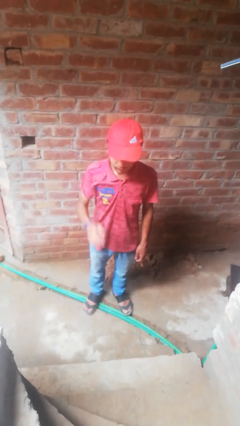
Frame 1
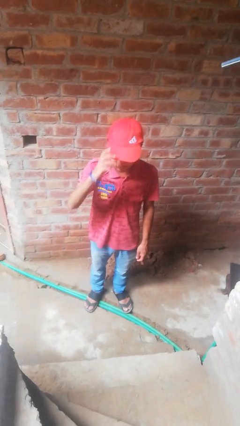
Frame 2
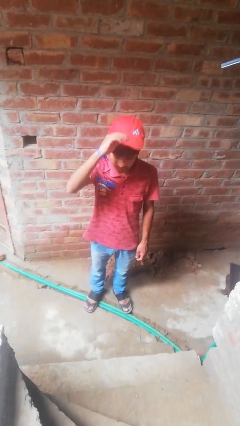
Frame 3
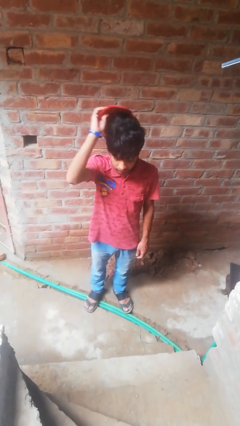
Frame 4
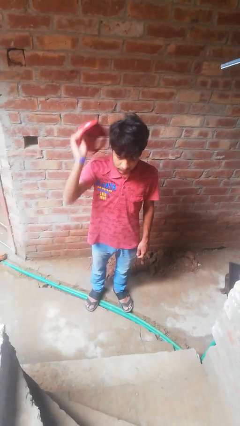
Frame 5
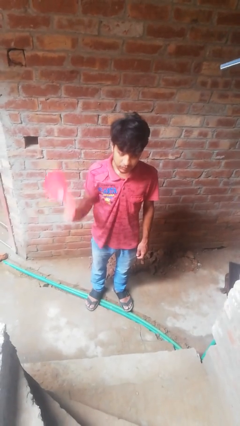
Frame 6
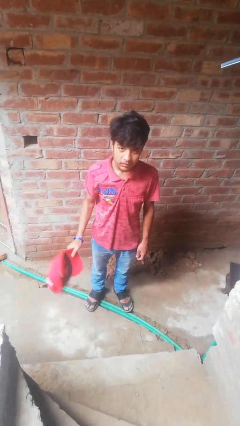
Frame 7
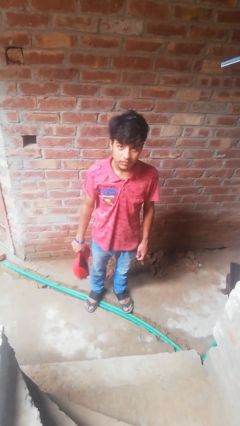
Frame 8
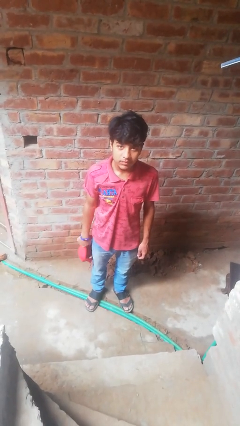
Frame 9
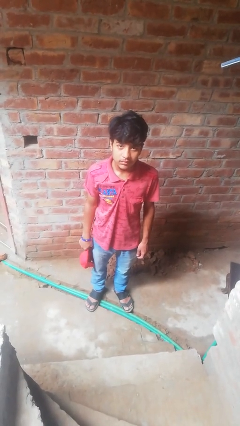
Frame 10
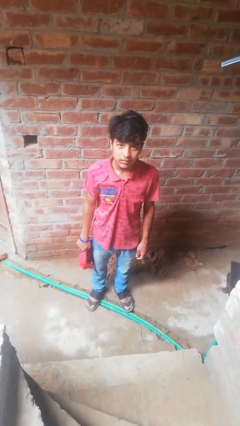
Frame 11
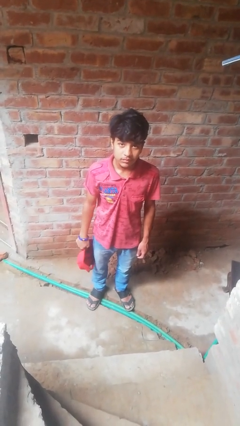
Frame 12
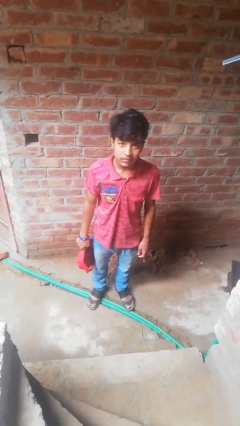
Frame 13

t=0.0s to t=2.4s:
person takes off hat

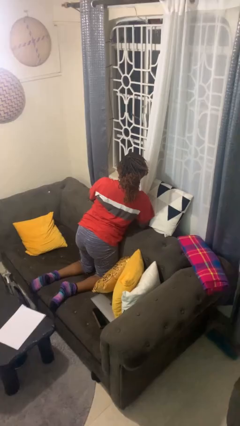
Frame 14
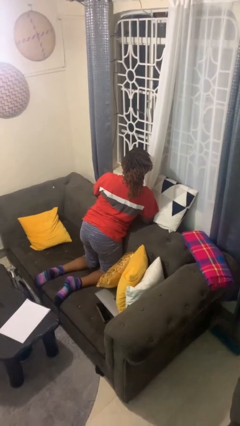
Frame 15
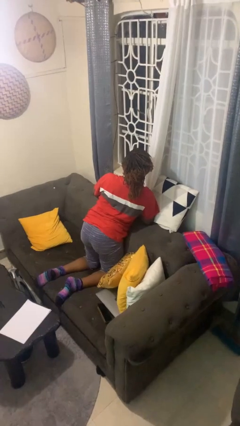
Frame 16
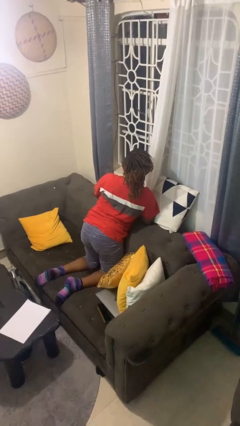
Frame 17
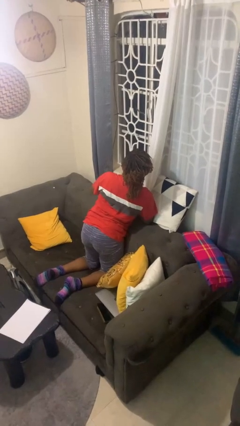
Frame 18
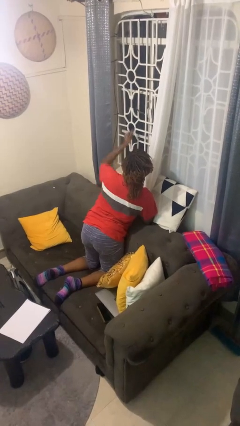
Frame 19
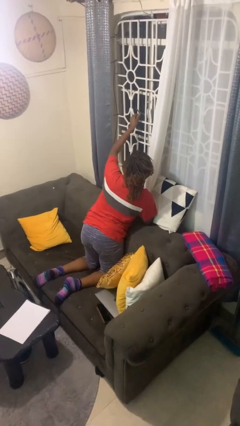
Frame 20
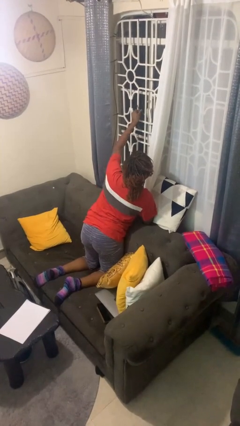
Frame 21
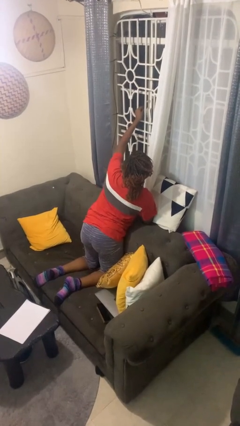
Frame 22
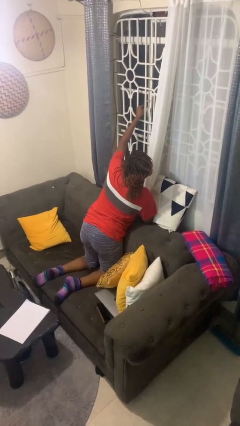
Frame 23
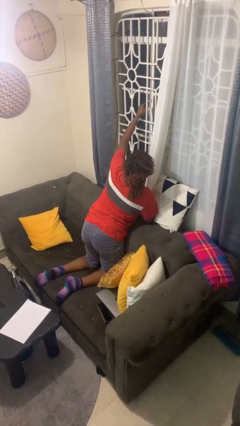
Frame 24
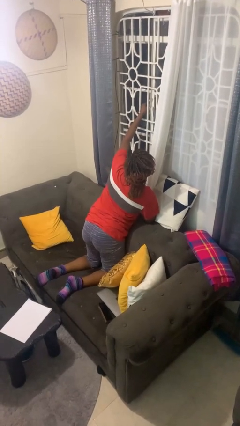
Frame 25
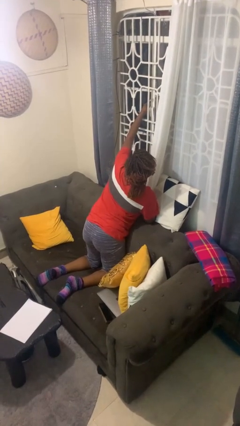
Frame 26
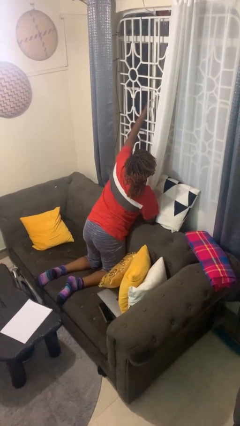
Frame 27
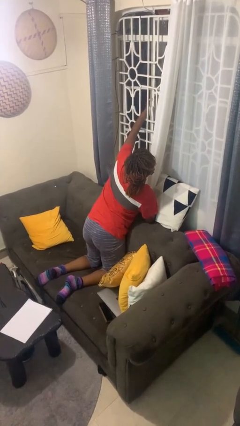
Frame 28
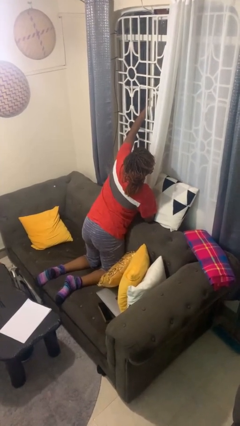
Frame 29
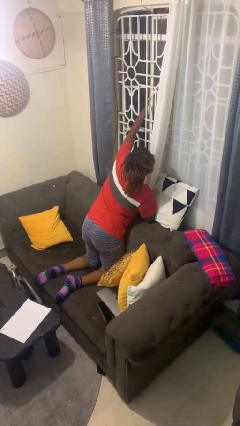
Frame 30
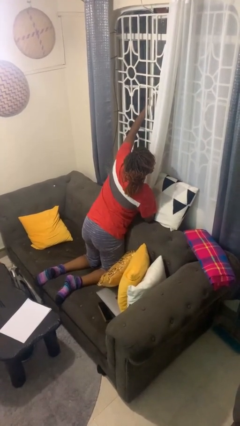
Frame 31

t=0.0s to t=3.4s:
person opens home window

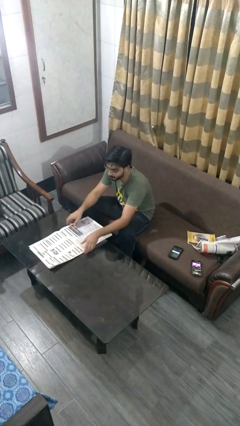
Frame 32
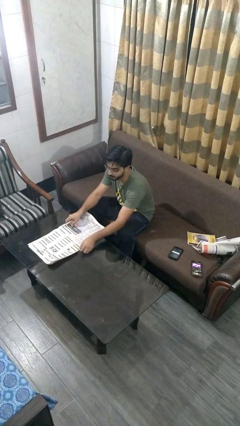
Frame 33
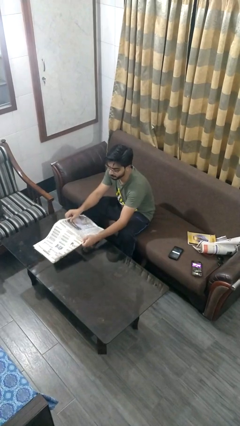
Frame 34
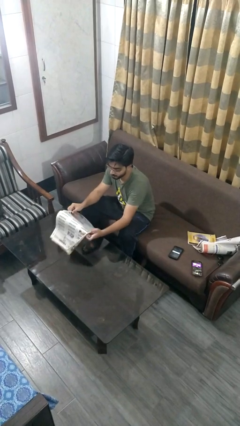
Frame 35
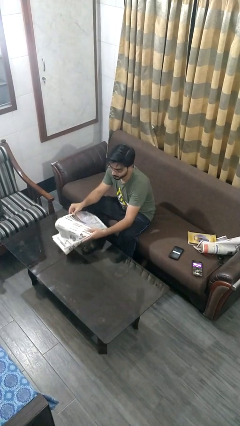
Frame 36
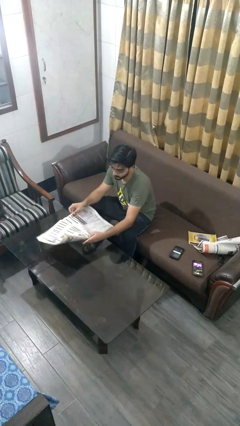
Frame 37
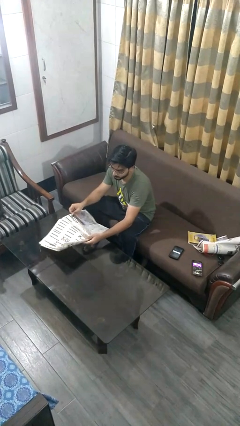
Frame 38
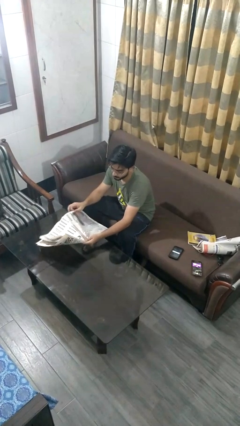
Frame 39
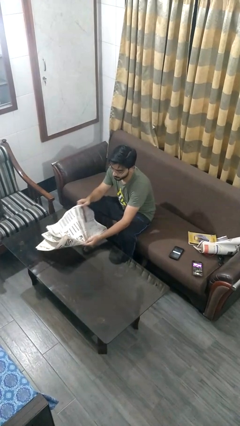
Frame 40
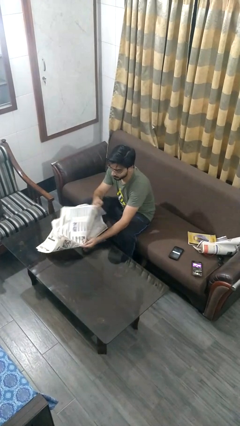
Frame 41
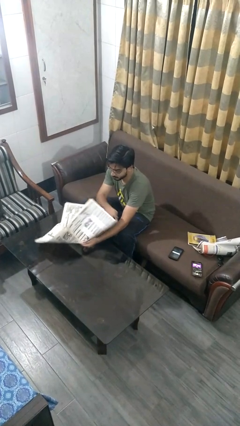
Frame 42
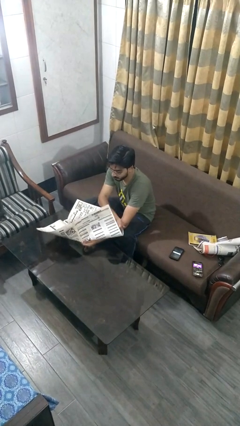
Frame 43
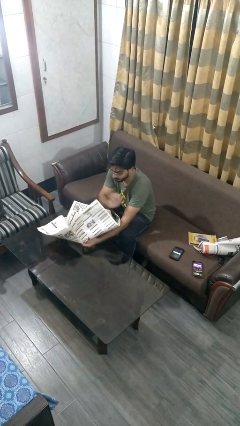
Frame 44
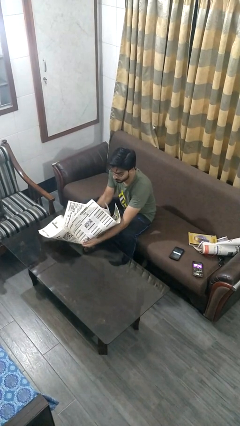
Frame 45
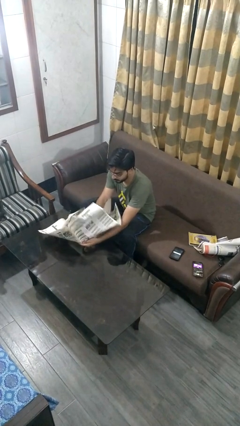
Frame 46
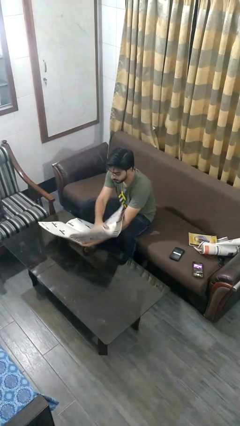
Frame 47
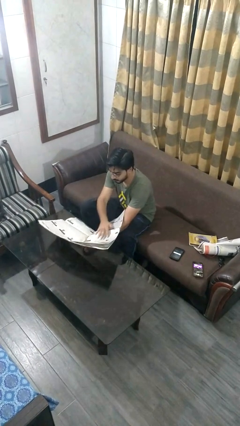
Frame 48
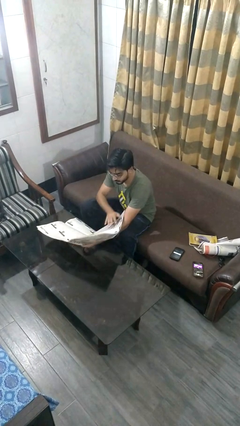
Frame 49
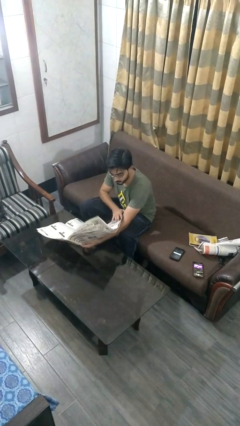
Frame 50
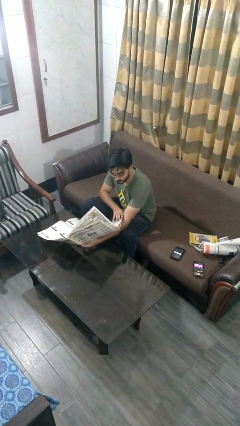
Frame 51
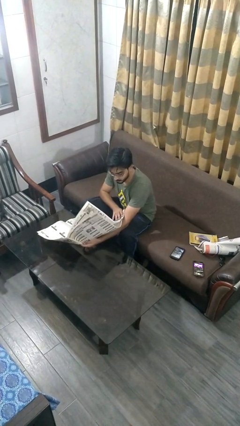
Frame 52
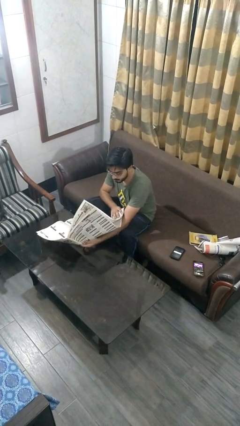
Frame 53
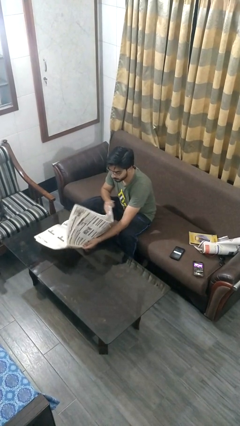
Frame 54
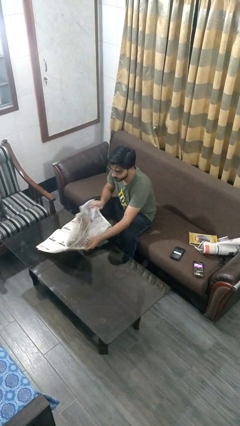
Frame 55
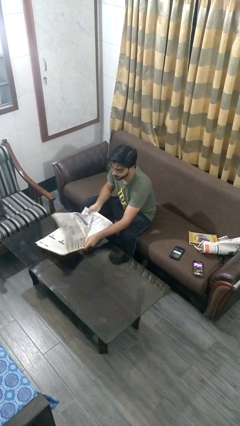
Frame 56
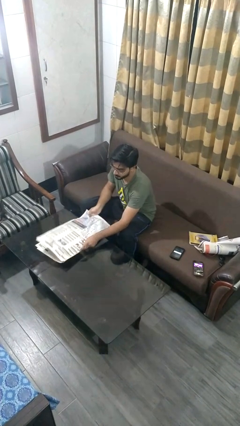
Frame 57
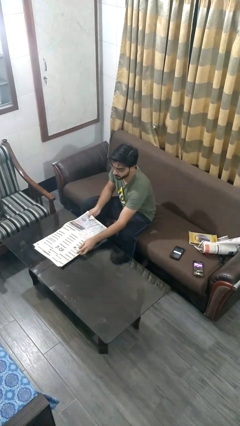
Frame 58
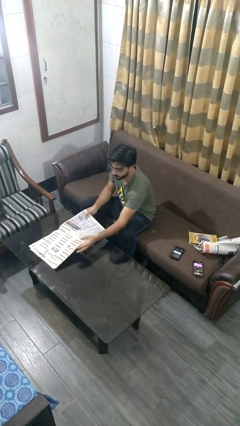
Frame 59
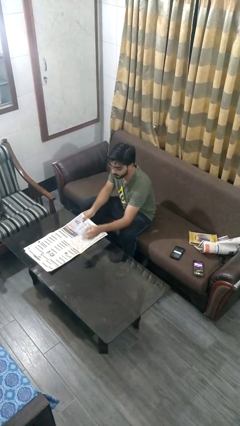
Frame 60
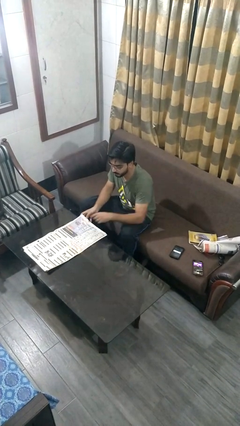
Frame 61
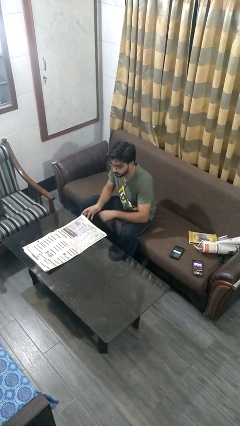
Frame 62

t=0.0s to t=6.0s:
person reads newspaper

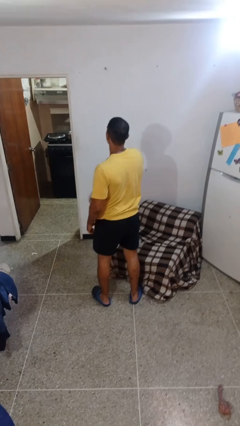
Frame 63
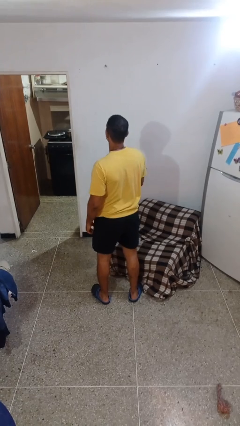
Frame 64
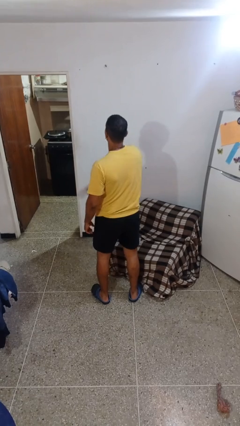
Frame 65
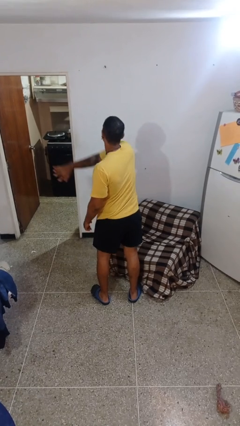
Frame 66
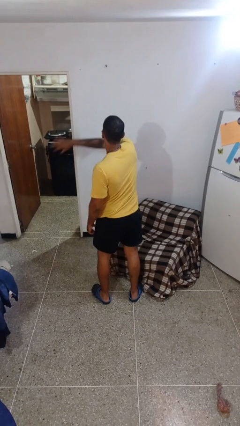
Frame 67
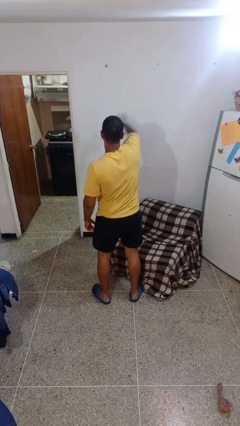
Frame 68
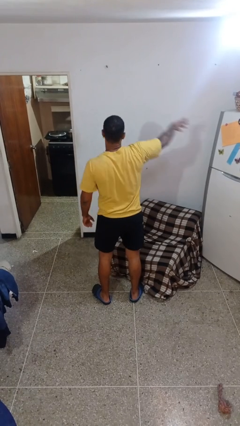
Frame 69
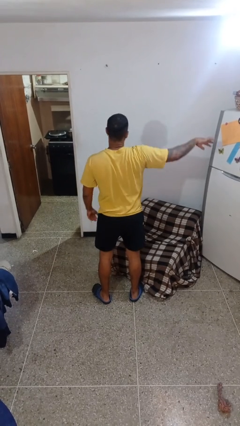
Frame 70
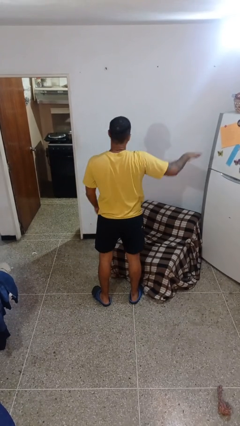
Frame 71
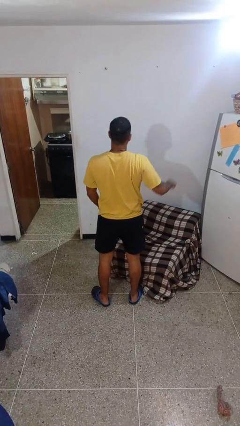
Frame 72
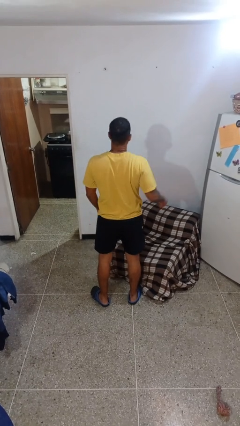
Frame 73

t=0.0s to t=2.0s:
person gestures swipe right

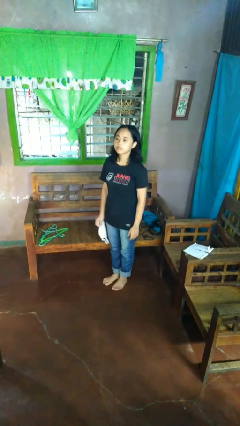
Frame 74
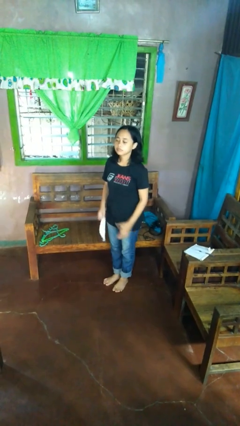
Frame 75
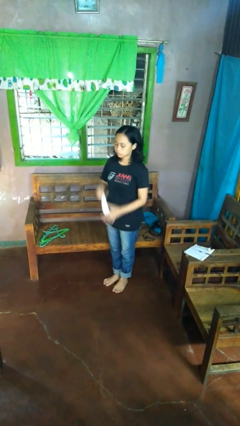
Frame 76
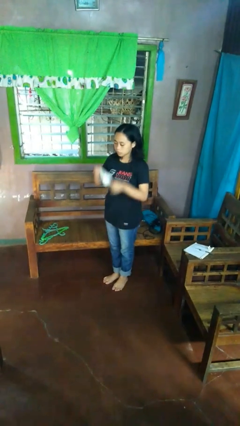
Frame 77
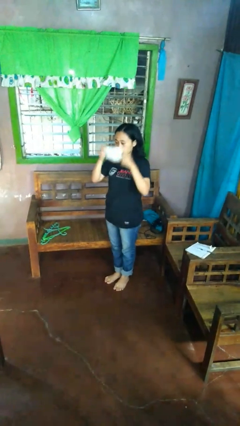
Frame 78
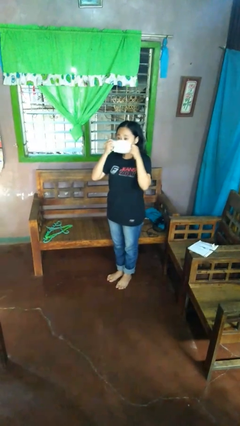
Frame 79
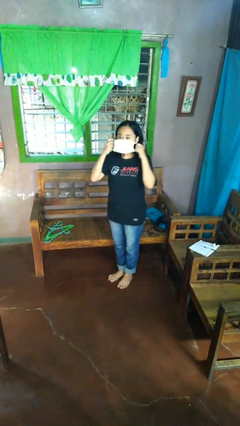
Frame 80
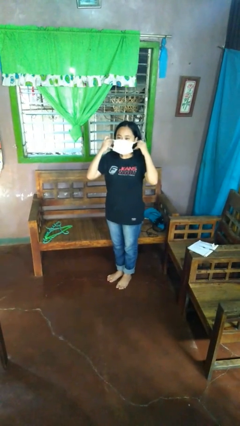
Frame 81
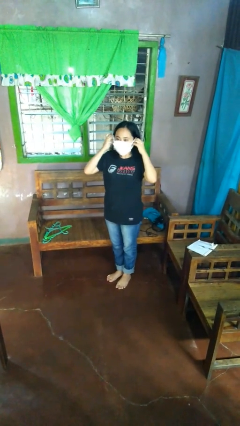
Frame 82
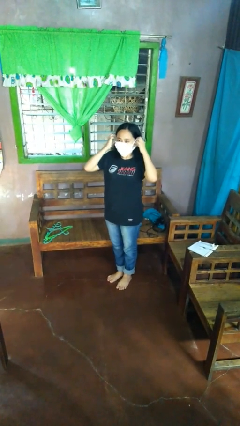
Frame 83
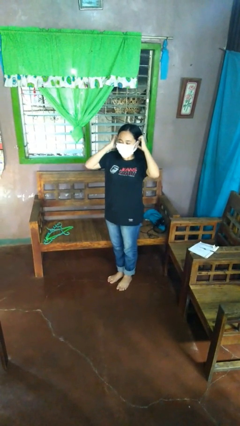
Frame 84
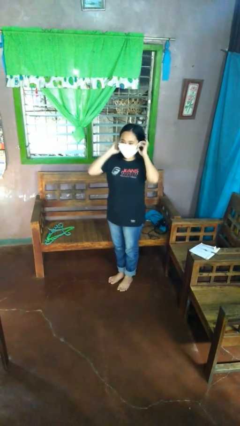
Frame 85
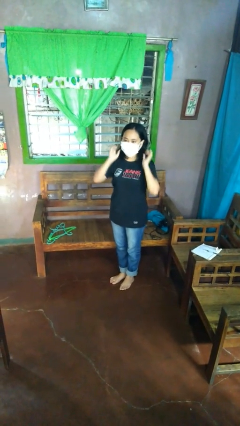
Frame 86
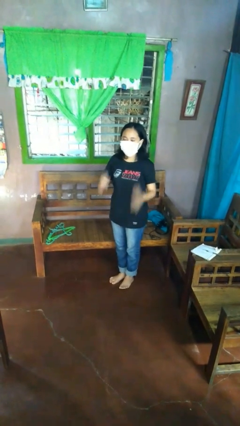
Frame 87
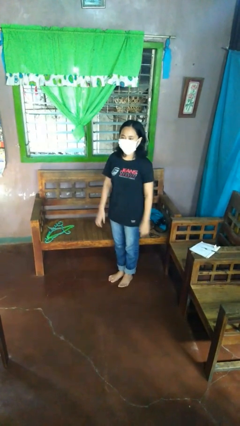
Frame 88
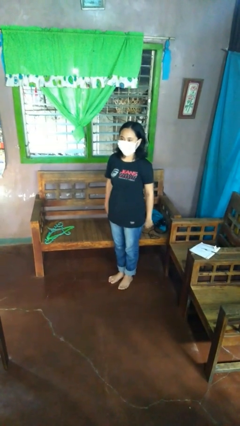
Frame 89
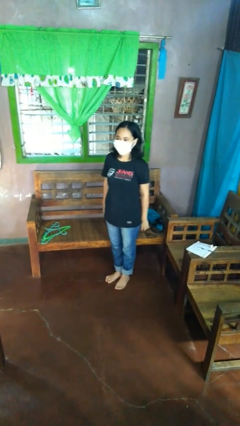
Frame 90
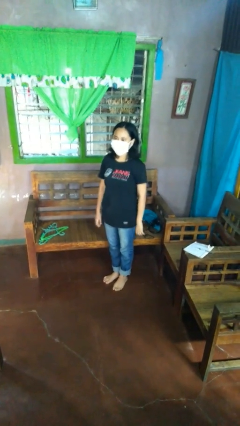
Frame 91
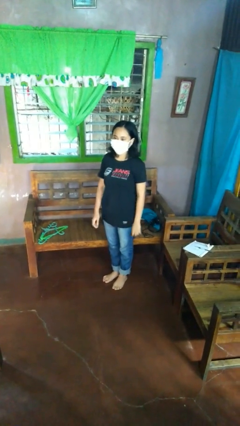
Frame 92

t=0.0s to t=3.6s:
person puts on facemask
